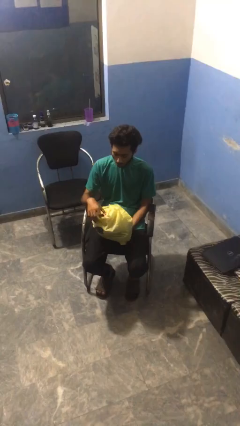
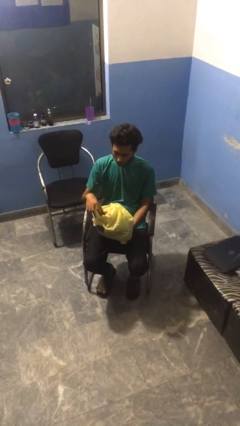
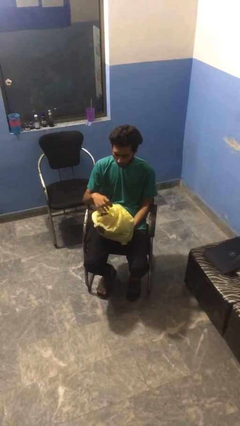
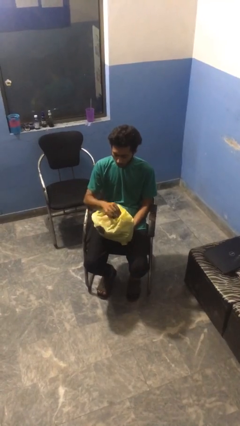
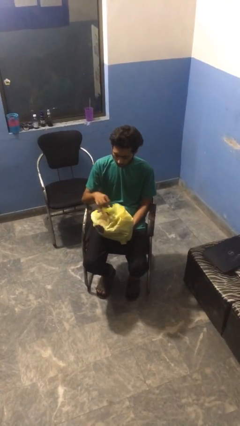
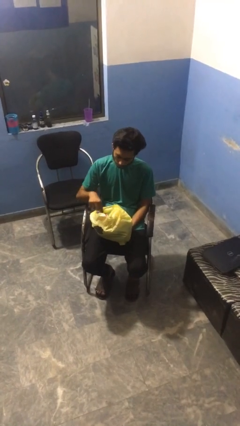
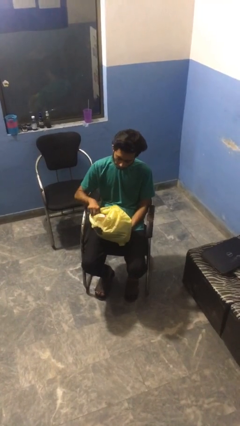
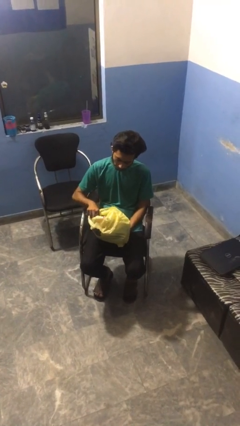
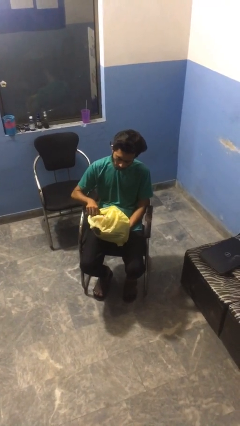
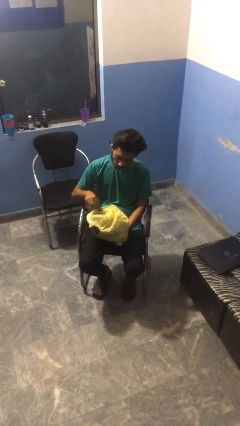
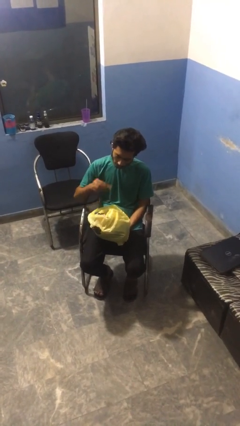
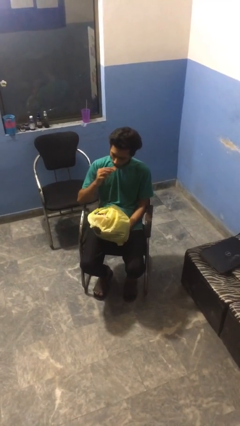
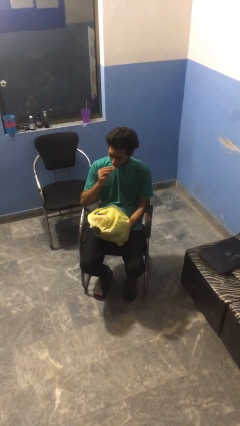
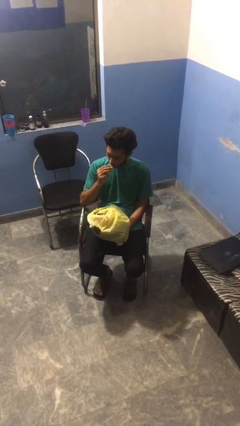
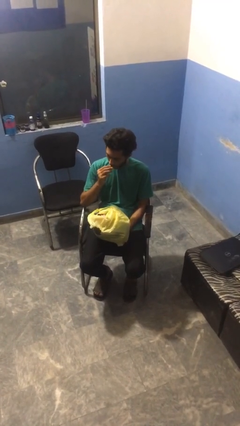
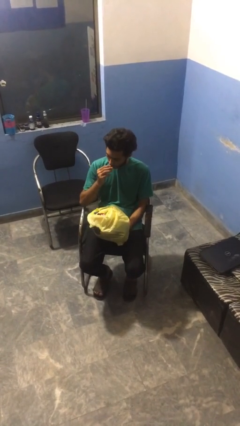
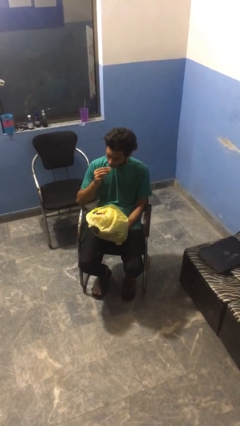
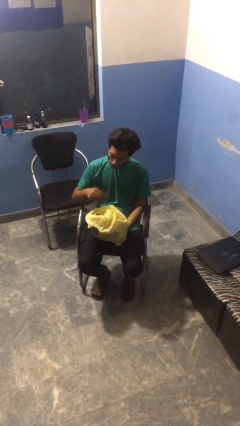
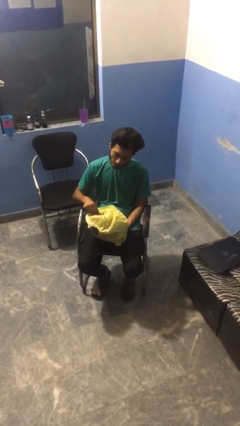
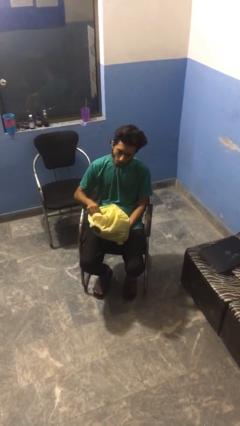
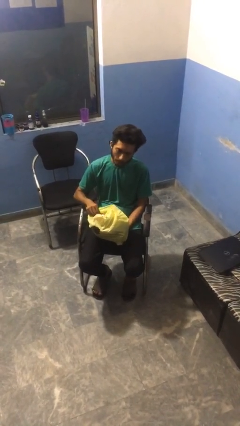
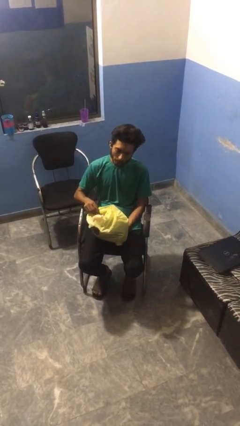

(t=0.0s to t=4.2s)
person eats snack from bag

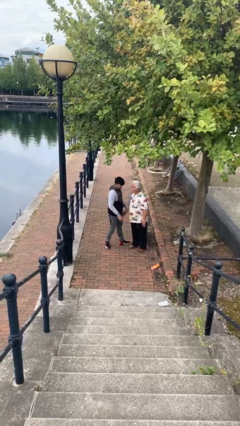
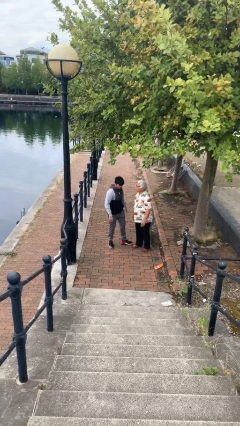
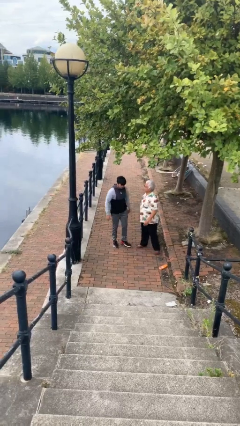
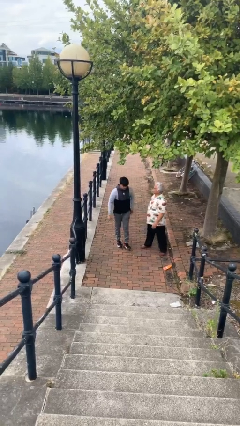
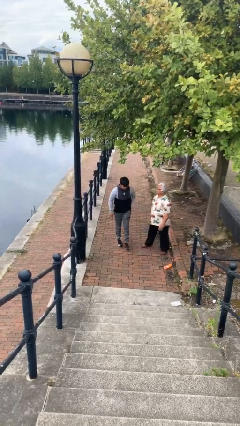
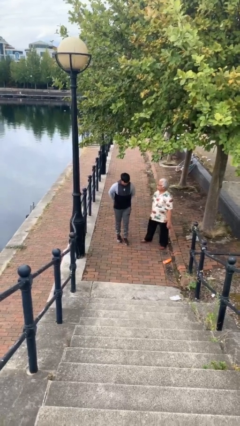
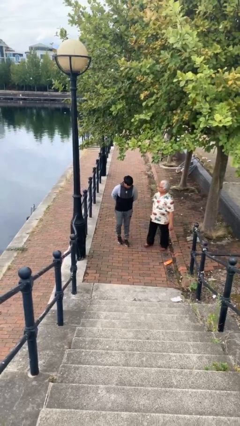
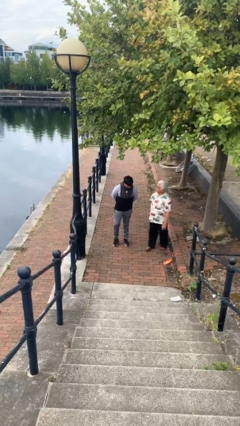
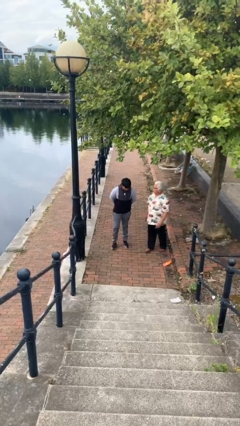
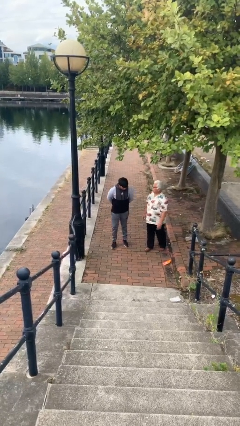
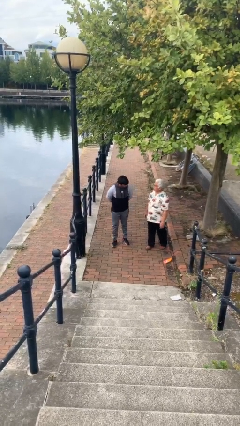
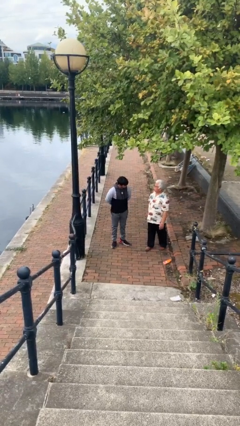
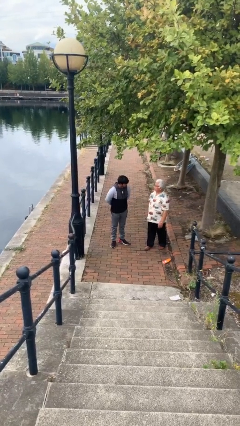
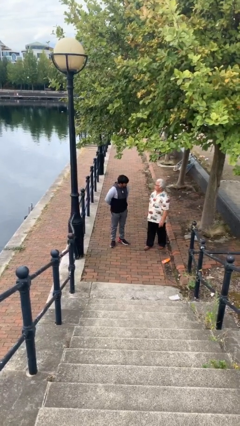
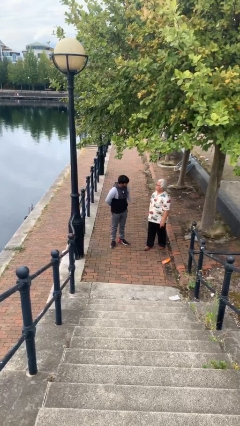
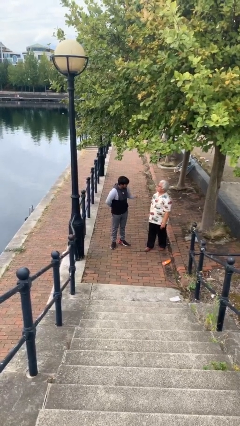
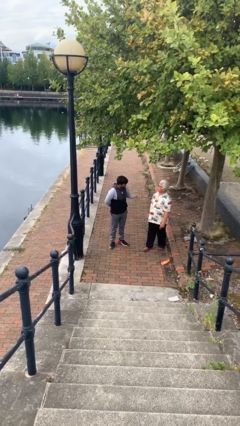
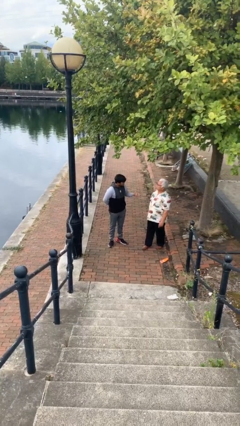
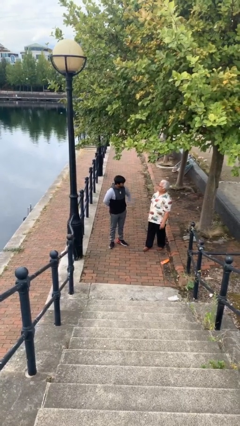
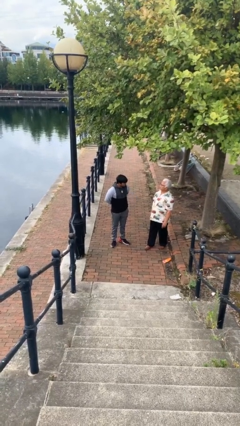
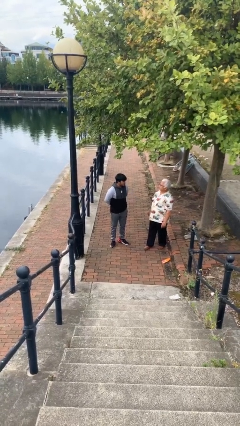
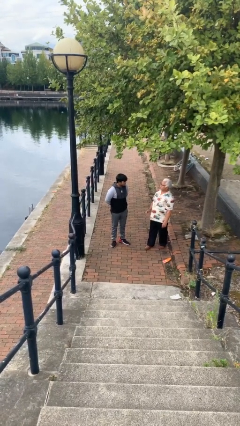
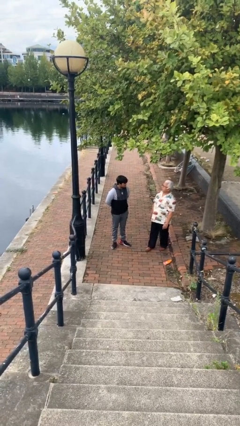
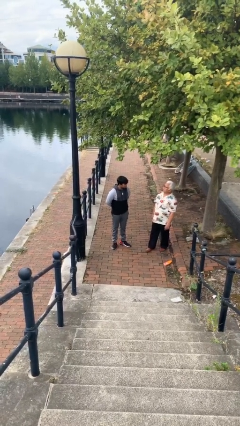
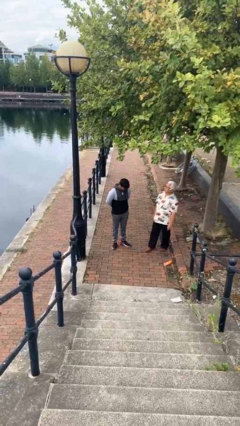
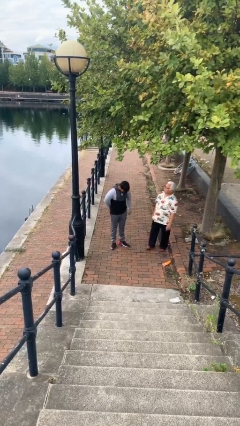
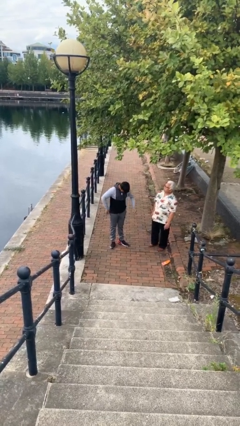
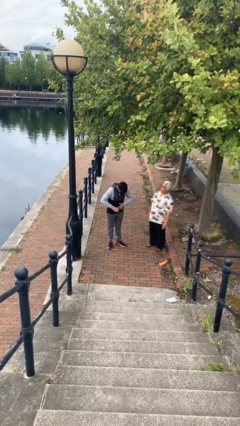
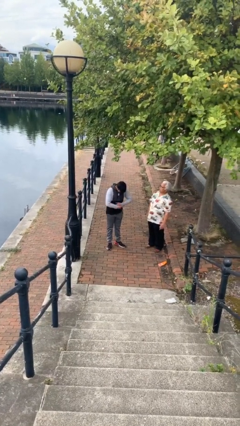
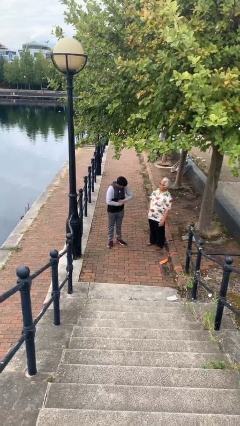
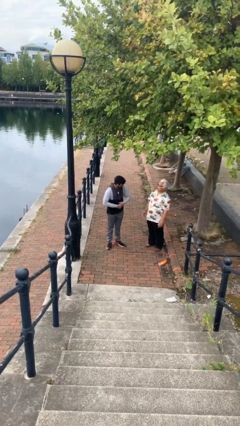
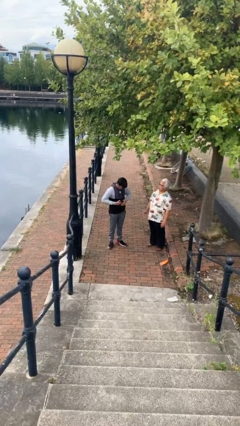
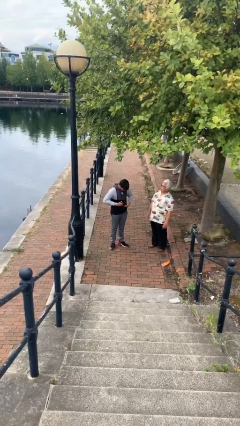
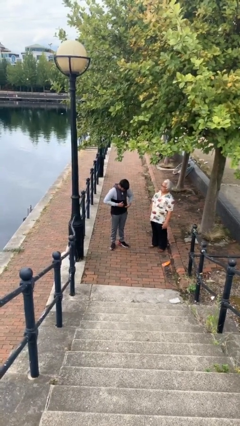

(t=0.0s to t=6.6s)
person talks to person

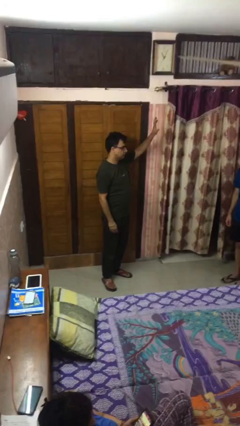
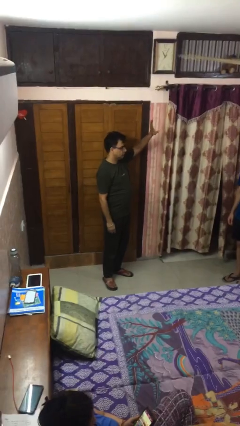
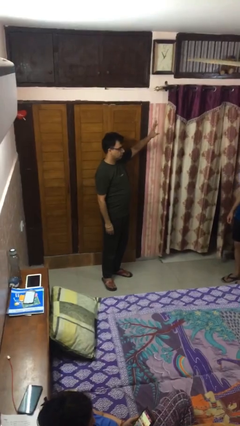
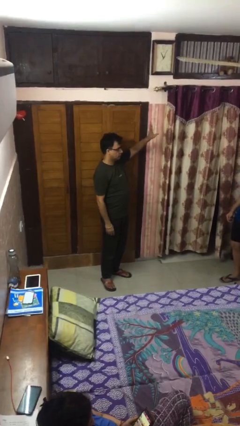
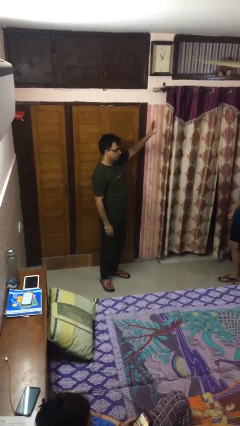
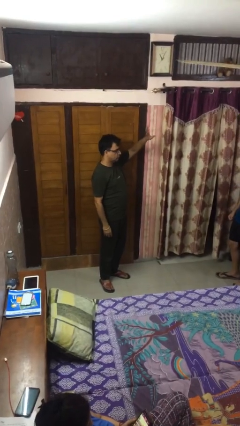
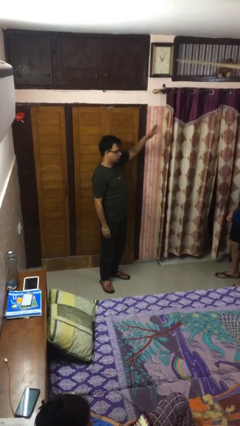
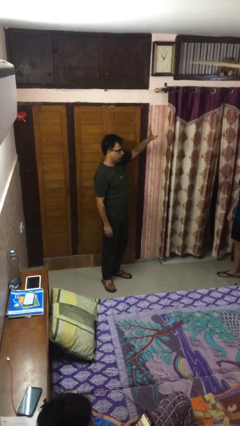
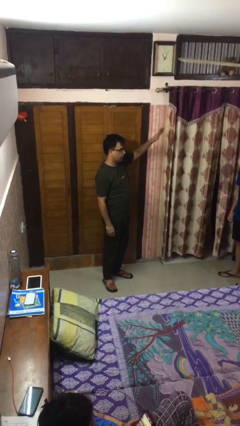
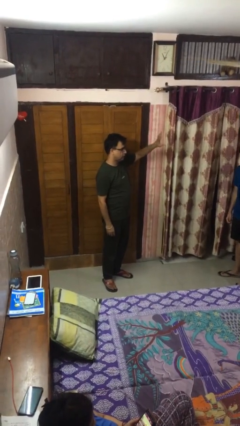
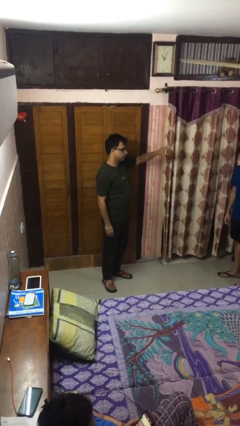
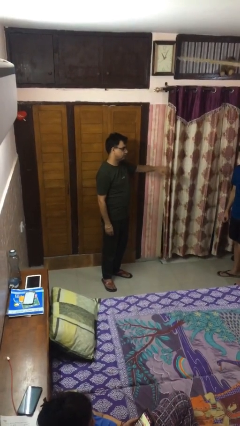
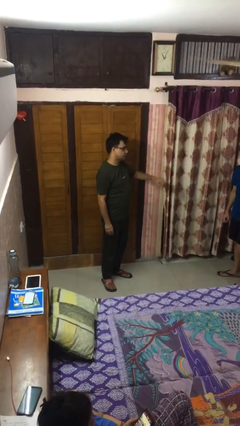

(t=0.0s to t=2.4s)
person waves at person

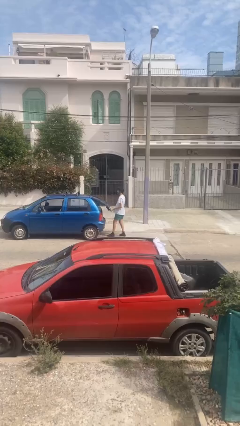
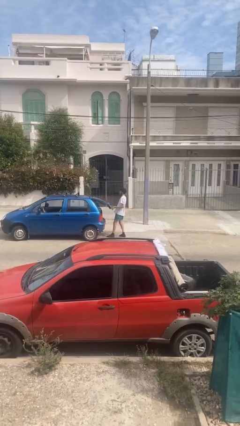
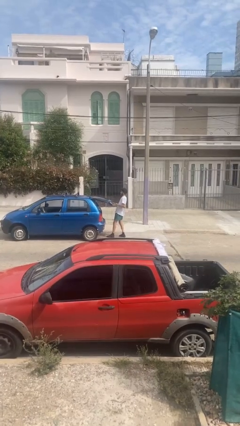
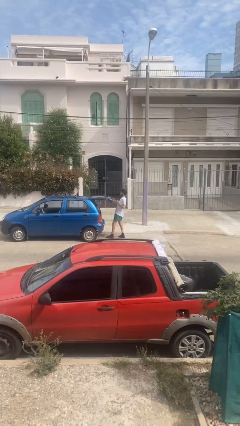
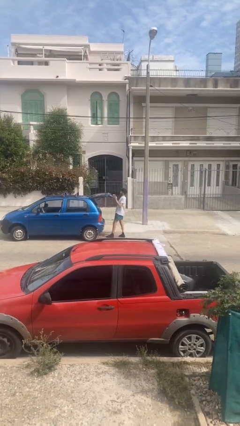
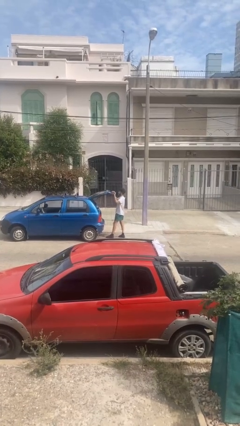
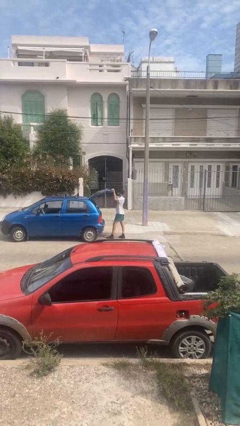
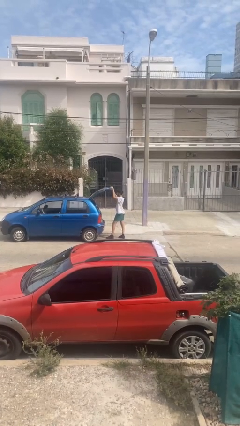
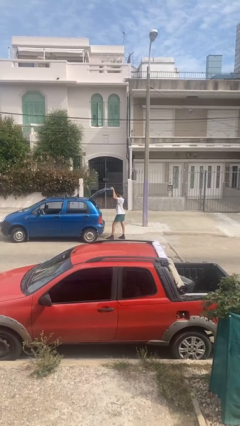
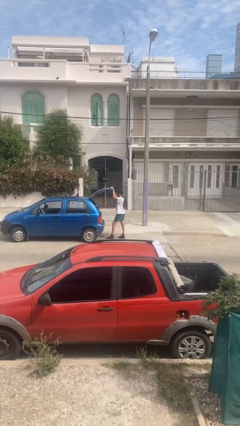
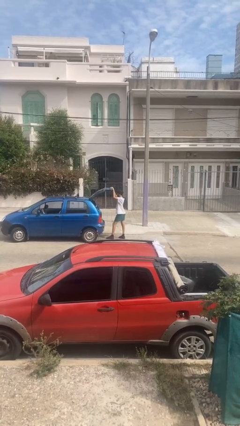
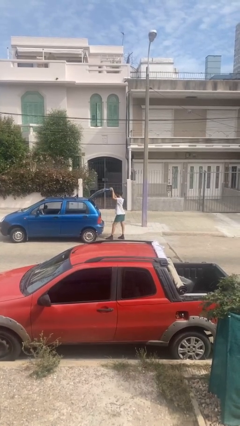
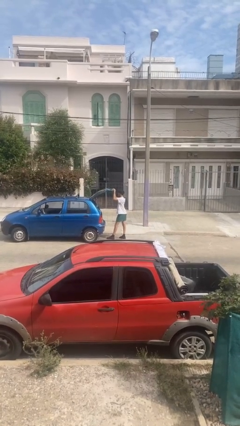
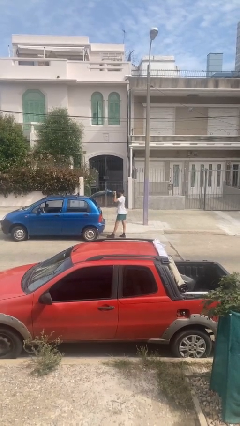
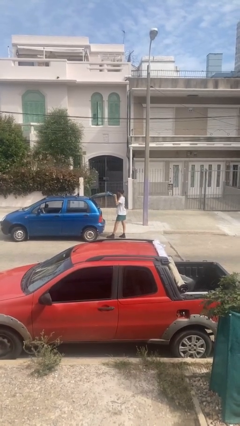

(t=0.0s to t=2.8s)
person opens car trunk

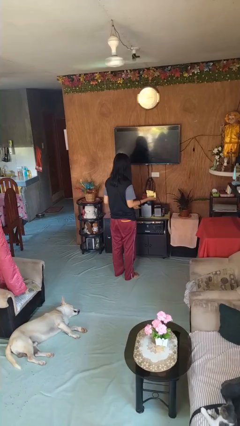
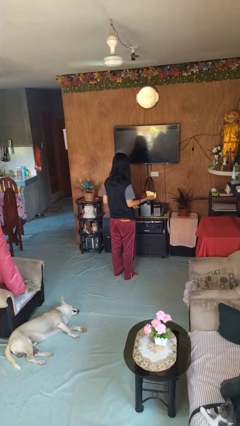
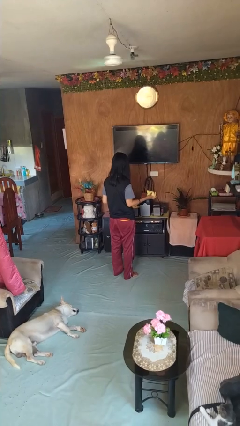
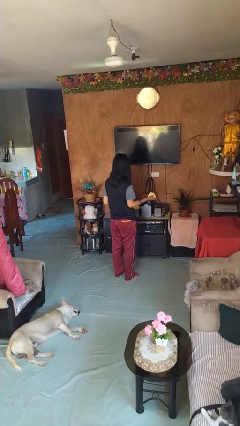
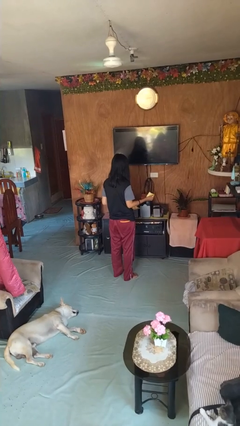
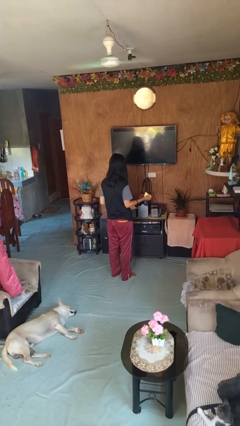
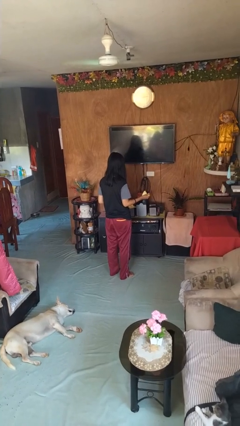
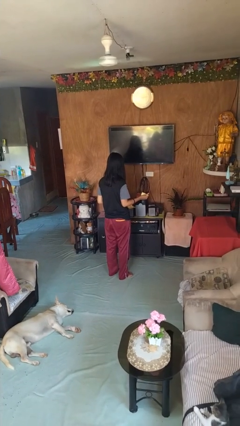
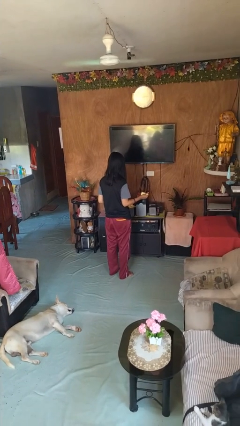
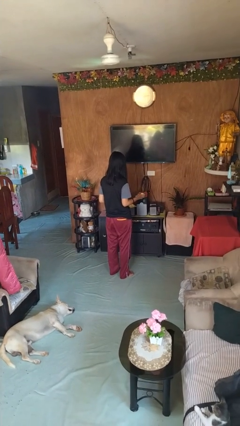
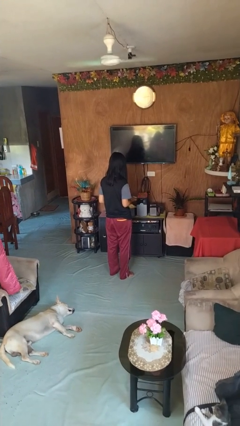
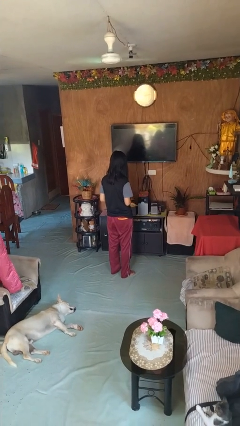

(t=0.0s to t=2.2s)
person crumples paper
